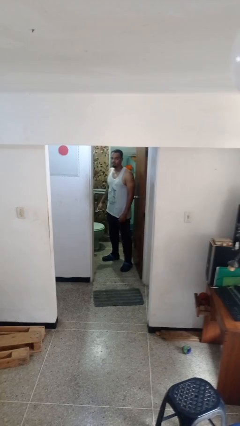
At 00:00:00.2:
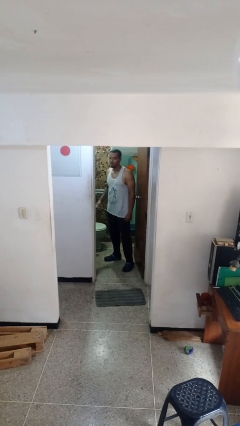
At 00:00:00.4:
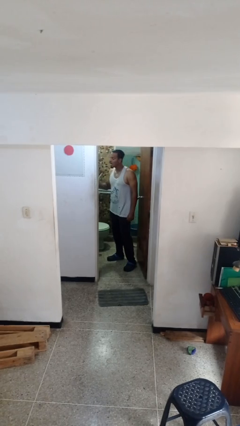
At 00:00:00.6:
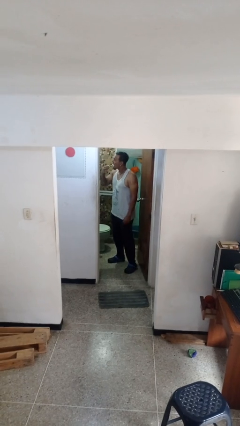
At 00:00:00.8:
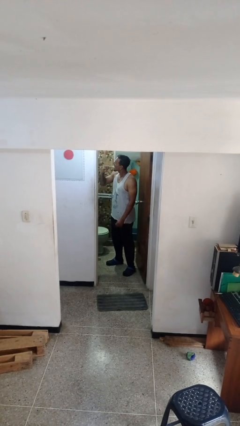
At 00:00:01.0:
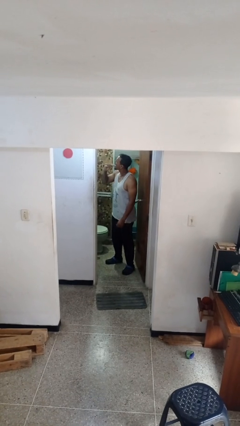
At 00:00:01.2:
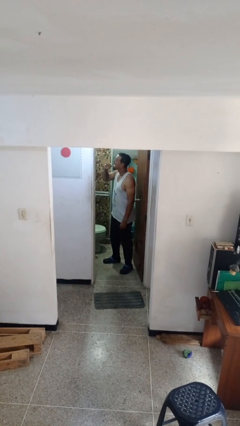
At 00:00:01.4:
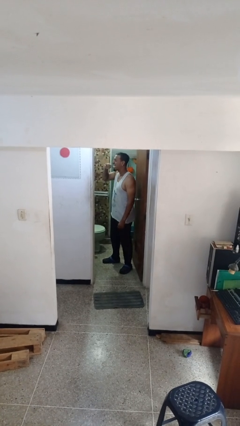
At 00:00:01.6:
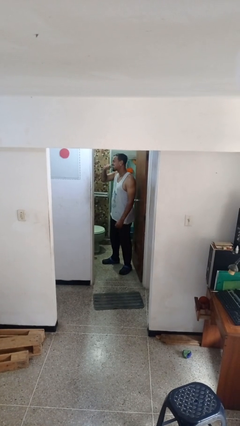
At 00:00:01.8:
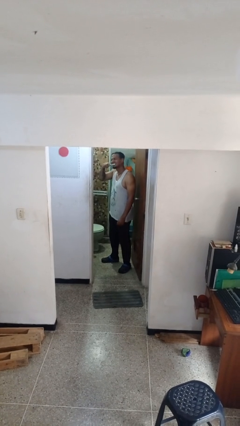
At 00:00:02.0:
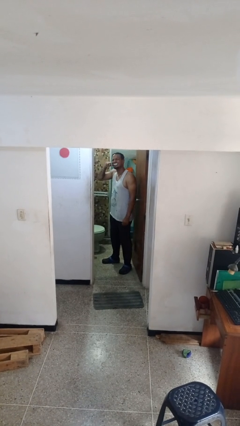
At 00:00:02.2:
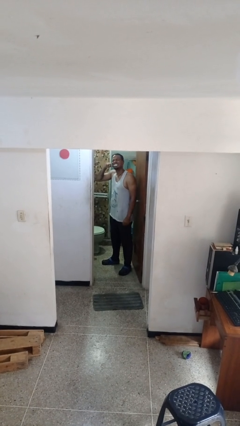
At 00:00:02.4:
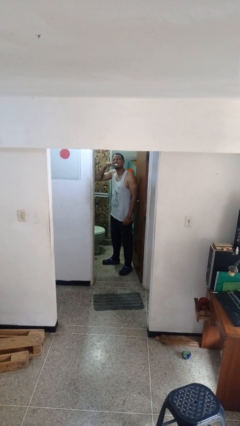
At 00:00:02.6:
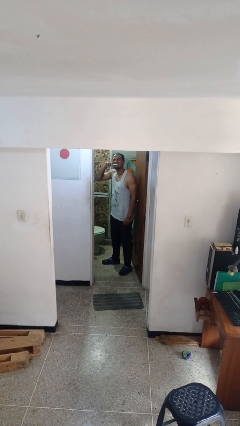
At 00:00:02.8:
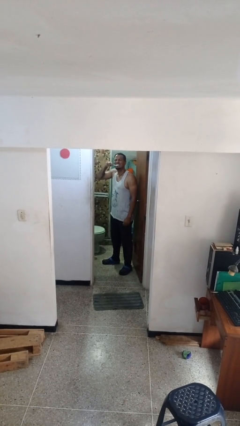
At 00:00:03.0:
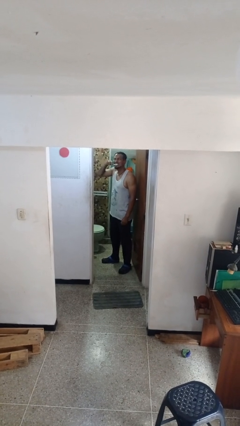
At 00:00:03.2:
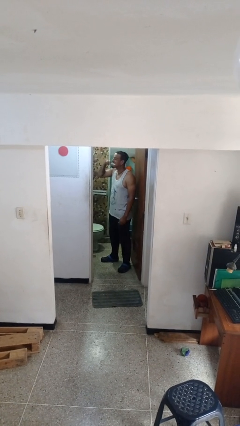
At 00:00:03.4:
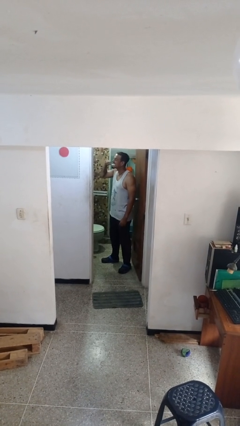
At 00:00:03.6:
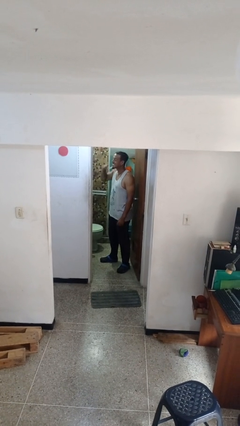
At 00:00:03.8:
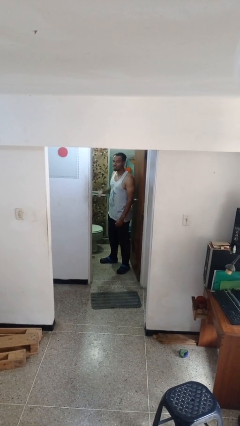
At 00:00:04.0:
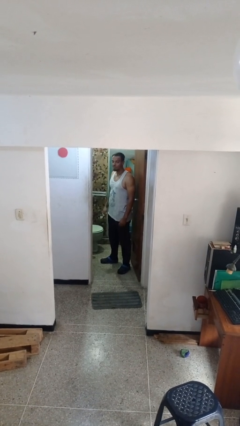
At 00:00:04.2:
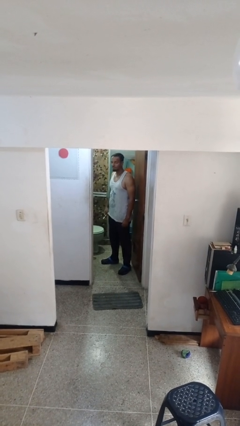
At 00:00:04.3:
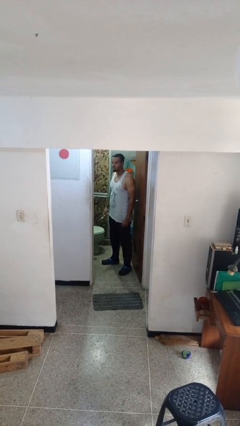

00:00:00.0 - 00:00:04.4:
person brushes teeth

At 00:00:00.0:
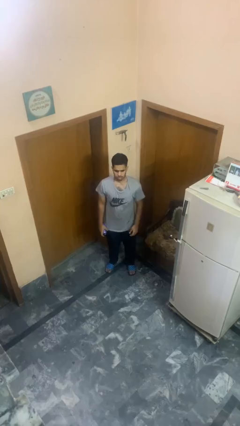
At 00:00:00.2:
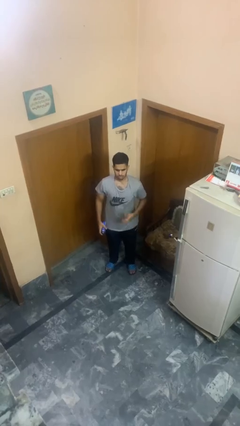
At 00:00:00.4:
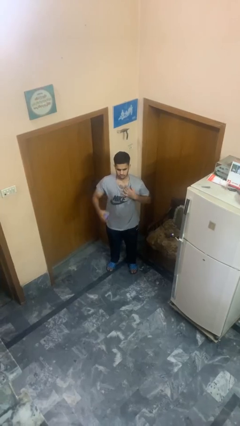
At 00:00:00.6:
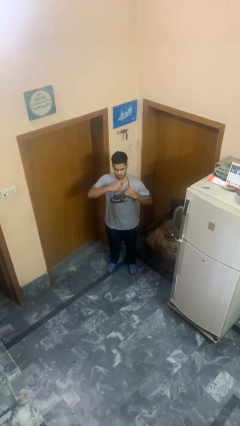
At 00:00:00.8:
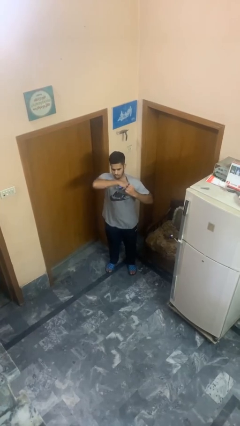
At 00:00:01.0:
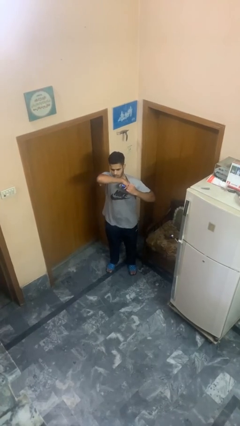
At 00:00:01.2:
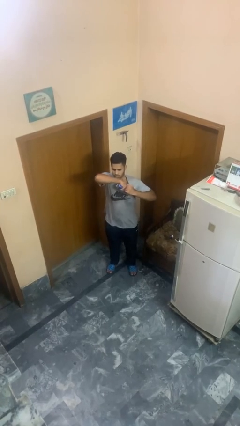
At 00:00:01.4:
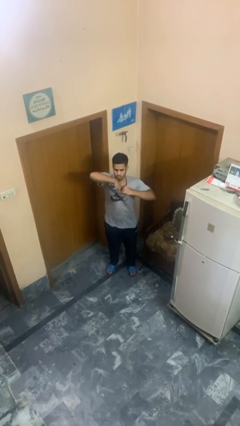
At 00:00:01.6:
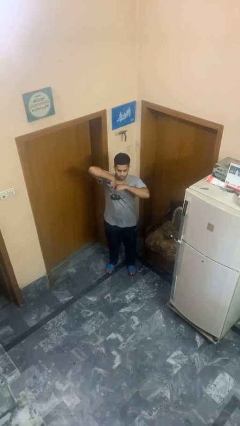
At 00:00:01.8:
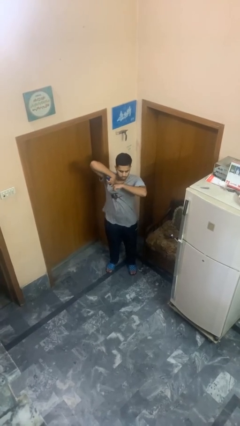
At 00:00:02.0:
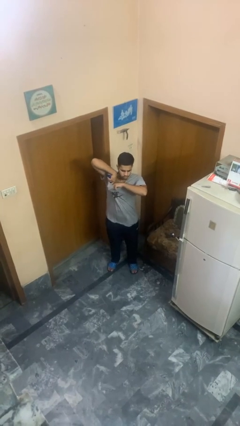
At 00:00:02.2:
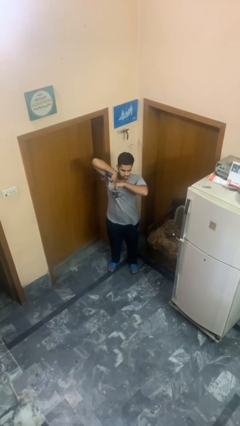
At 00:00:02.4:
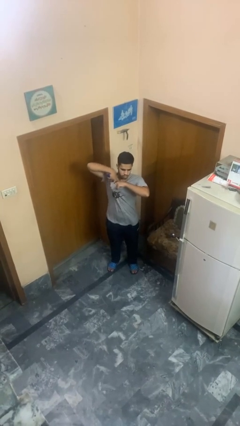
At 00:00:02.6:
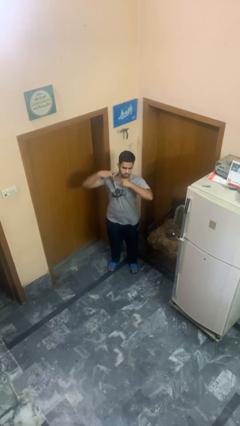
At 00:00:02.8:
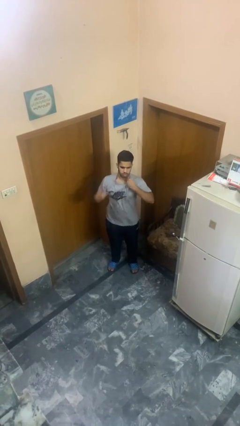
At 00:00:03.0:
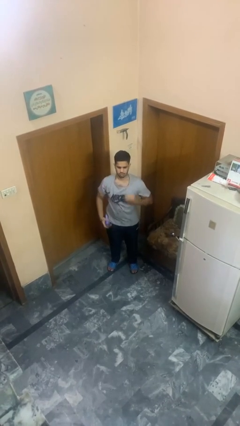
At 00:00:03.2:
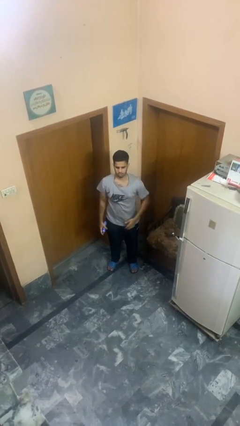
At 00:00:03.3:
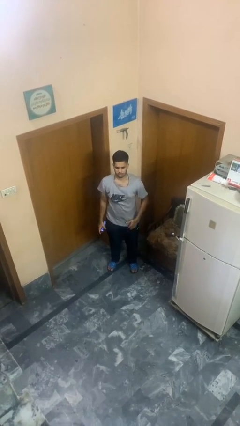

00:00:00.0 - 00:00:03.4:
person applies deodorant

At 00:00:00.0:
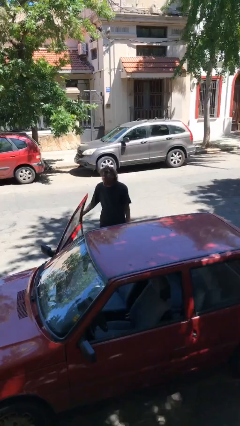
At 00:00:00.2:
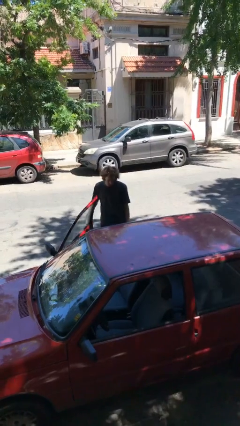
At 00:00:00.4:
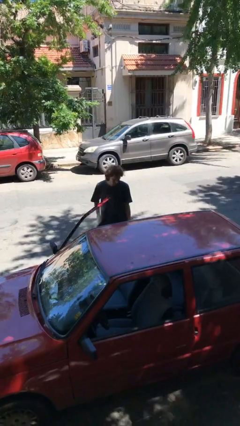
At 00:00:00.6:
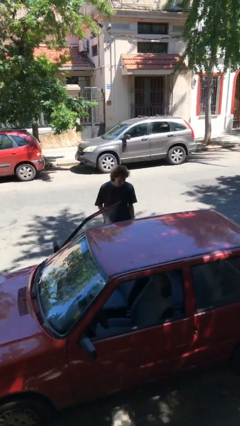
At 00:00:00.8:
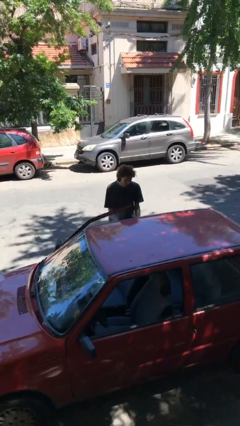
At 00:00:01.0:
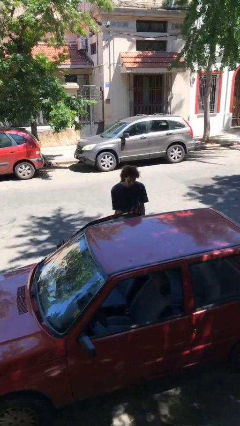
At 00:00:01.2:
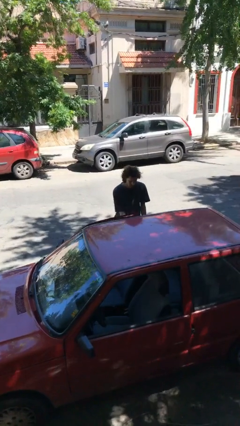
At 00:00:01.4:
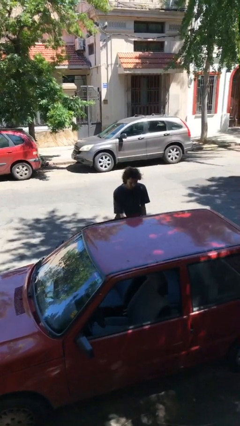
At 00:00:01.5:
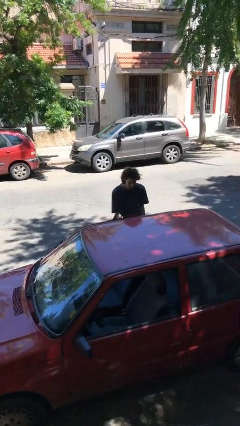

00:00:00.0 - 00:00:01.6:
person closes car door

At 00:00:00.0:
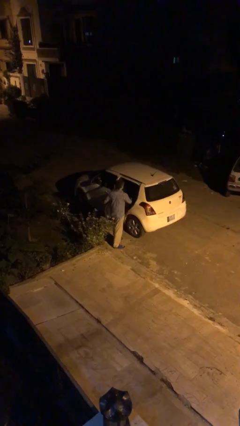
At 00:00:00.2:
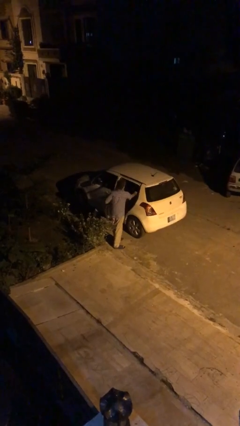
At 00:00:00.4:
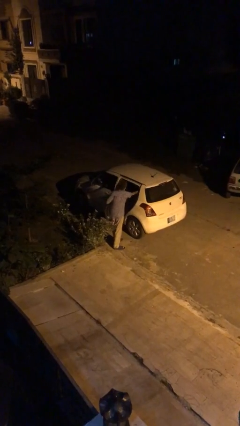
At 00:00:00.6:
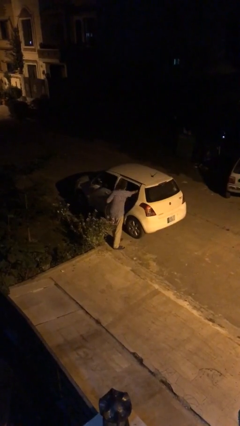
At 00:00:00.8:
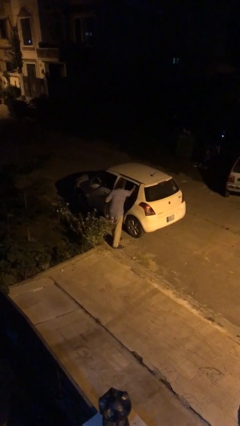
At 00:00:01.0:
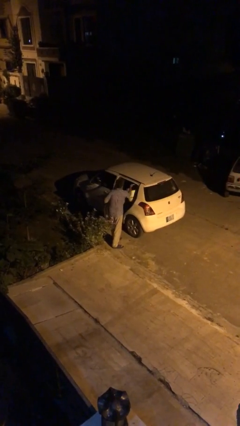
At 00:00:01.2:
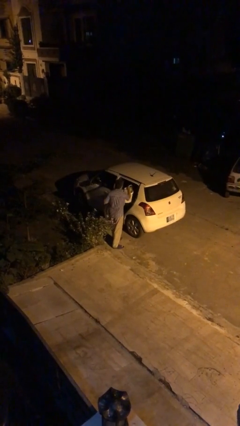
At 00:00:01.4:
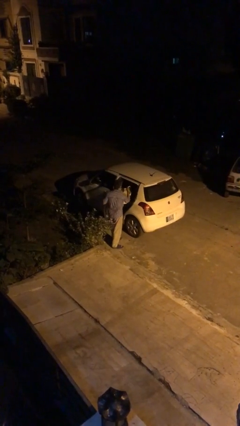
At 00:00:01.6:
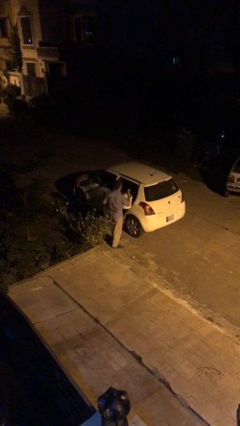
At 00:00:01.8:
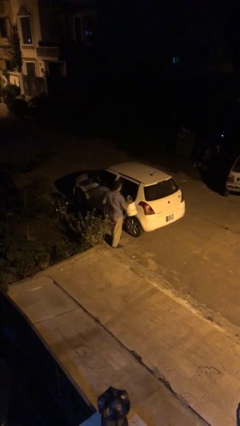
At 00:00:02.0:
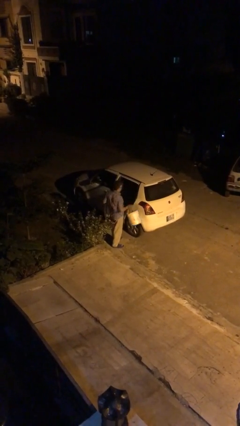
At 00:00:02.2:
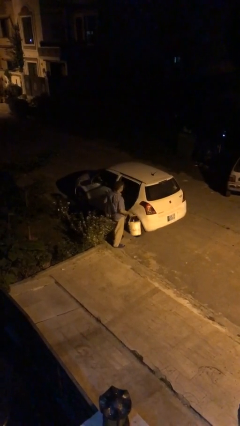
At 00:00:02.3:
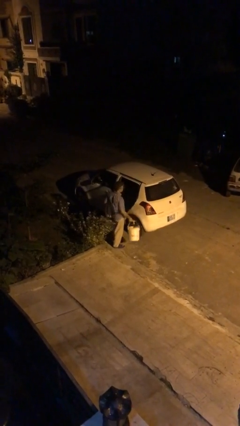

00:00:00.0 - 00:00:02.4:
person unloads car

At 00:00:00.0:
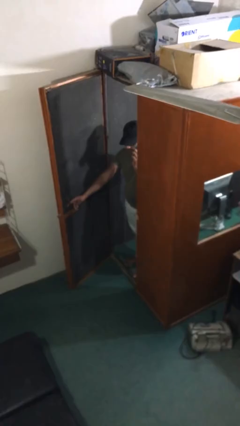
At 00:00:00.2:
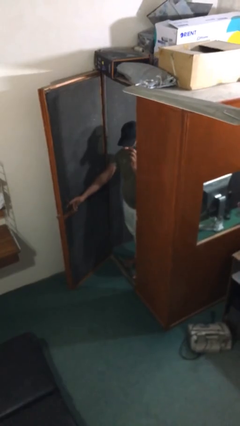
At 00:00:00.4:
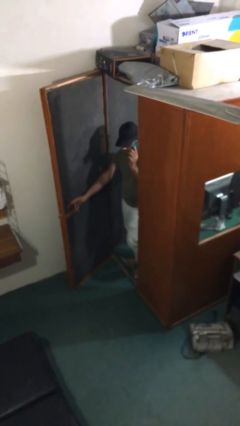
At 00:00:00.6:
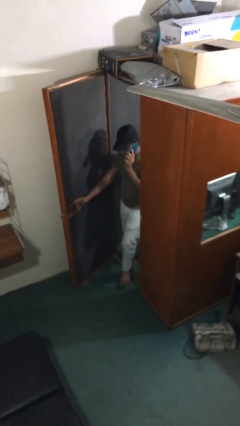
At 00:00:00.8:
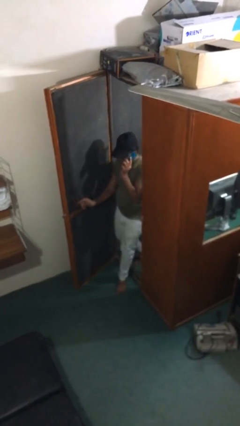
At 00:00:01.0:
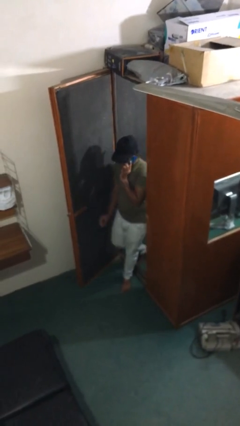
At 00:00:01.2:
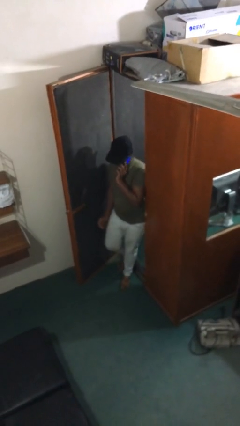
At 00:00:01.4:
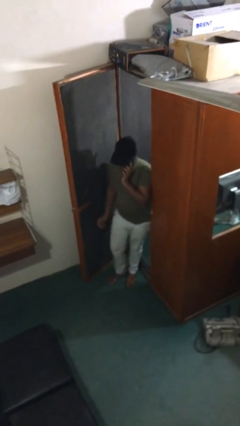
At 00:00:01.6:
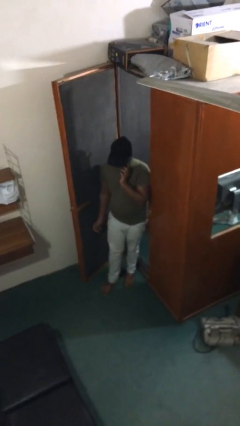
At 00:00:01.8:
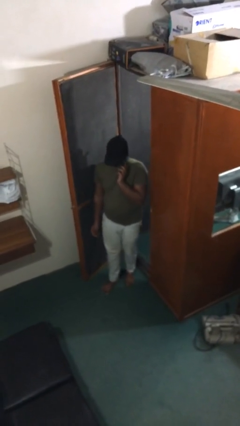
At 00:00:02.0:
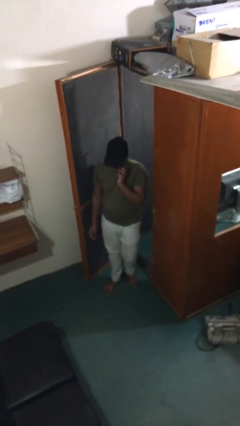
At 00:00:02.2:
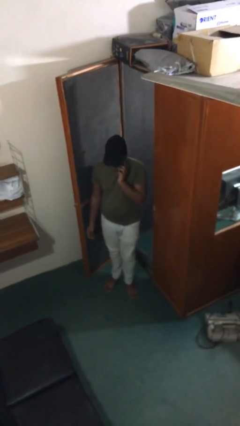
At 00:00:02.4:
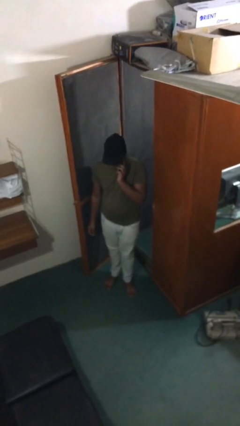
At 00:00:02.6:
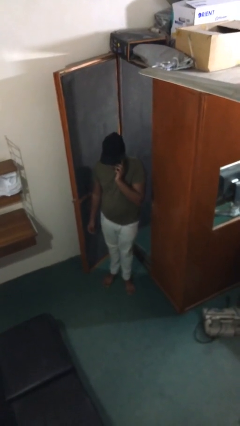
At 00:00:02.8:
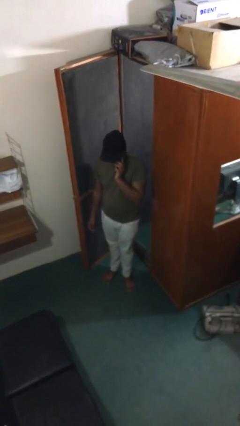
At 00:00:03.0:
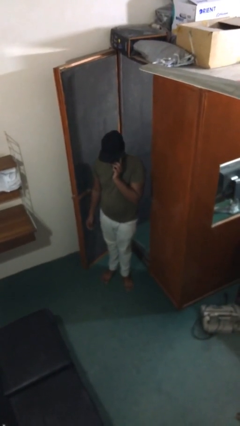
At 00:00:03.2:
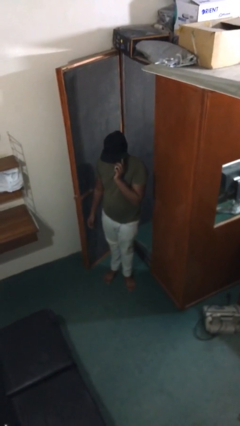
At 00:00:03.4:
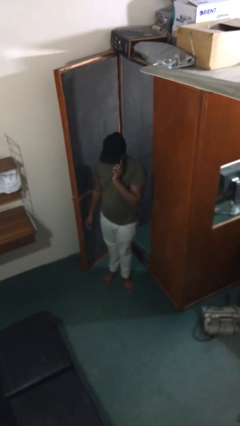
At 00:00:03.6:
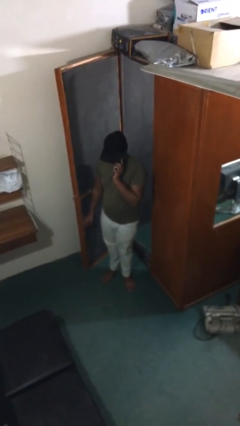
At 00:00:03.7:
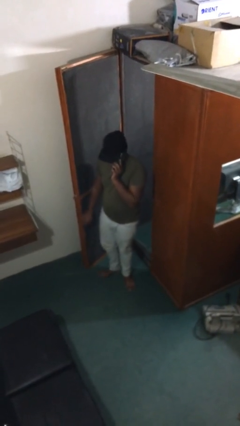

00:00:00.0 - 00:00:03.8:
person enters scene through structure

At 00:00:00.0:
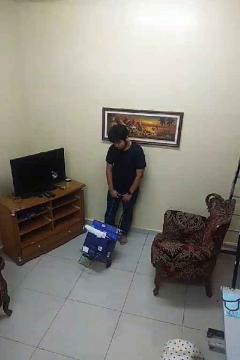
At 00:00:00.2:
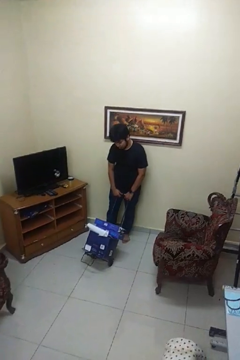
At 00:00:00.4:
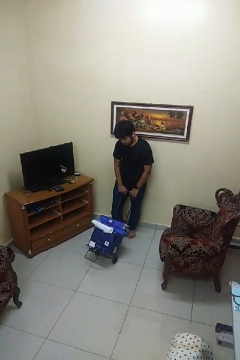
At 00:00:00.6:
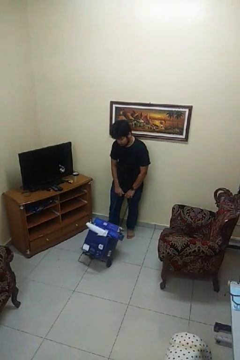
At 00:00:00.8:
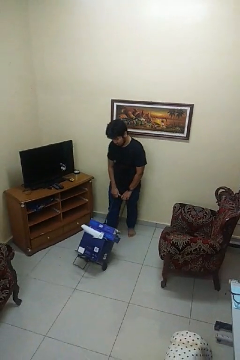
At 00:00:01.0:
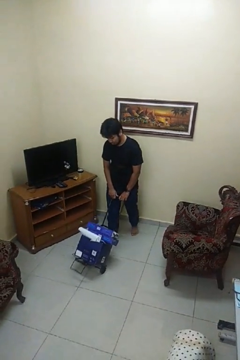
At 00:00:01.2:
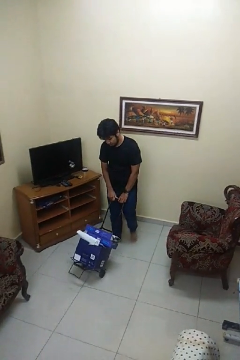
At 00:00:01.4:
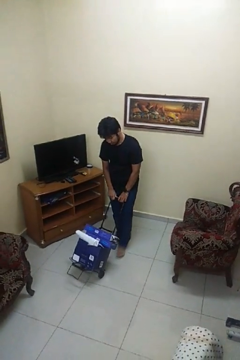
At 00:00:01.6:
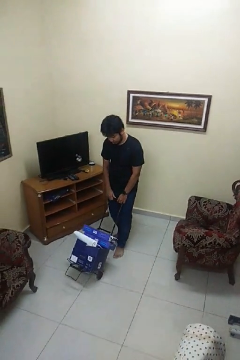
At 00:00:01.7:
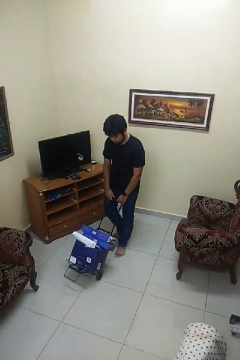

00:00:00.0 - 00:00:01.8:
person pushes wheeled cart
